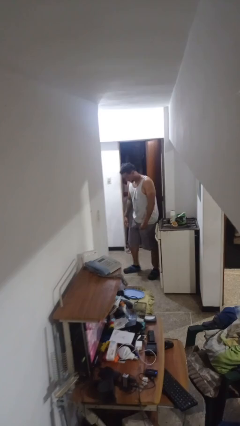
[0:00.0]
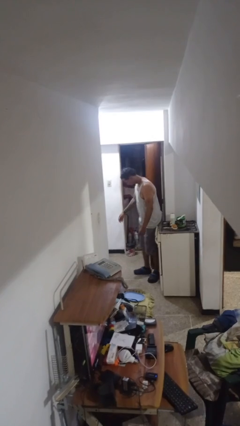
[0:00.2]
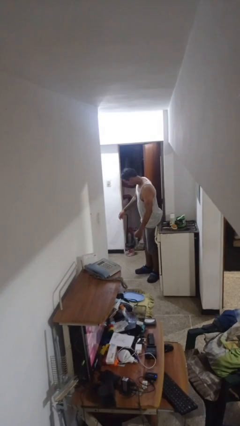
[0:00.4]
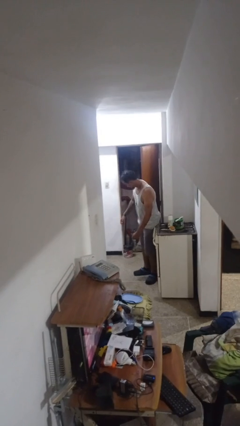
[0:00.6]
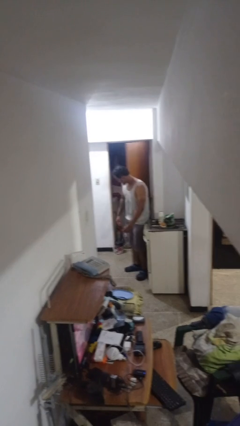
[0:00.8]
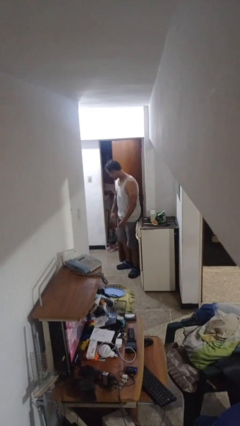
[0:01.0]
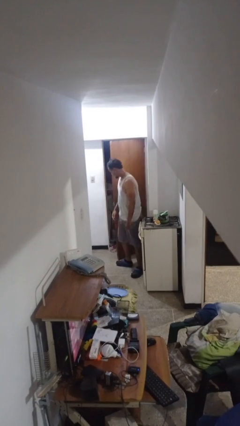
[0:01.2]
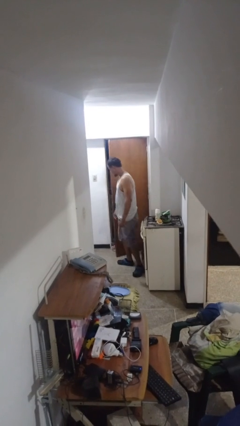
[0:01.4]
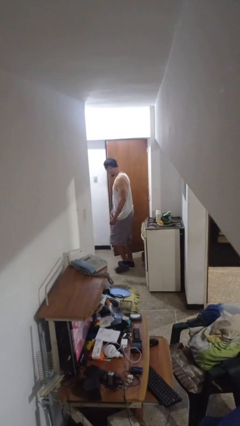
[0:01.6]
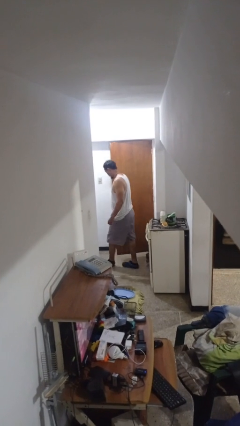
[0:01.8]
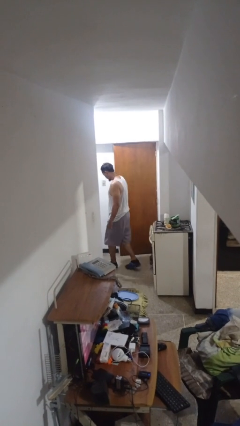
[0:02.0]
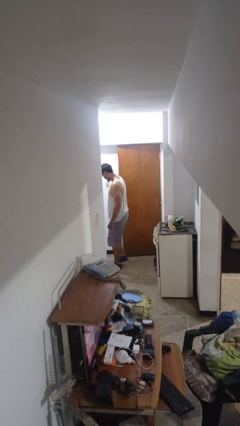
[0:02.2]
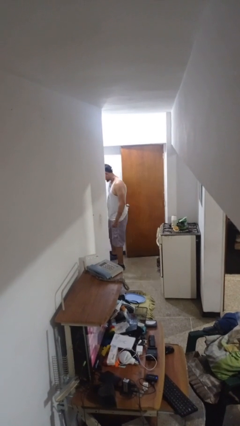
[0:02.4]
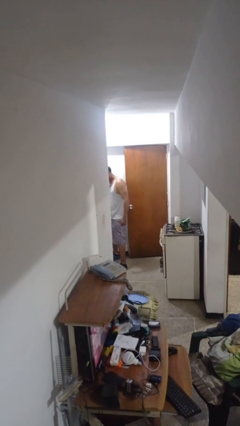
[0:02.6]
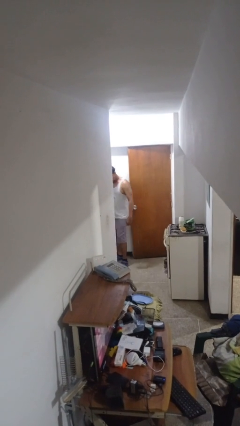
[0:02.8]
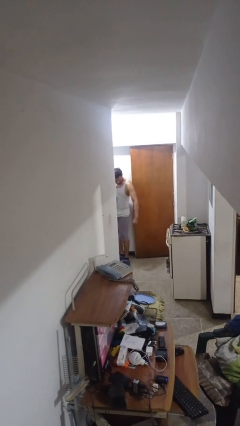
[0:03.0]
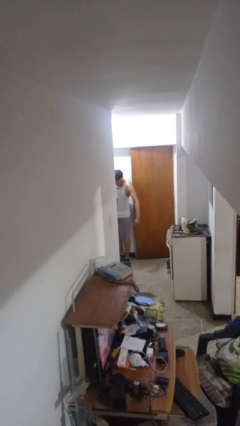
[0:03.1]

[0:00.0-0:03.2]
person closes door with hip

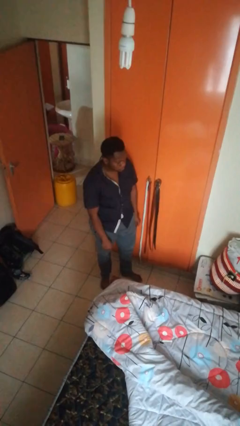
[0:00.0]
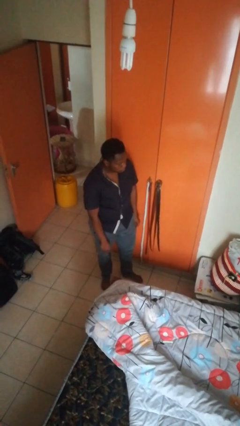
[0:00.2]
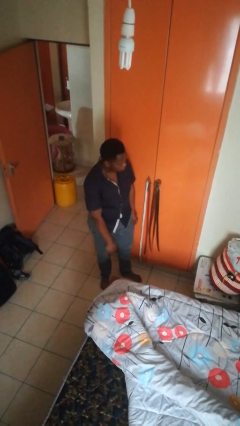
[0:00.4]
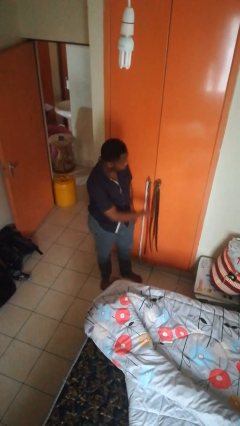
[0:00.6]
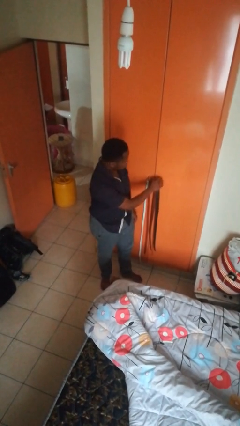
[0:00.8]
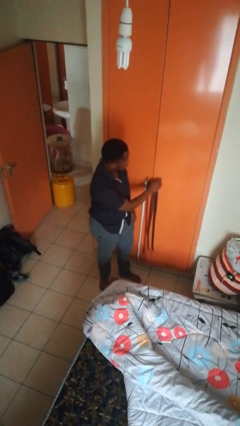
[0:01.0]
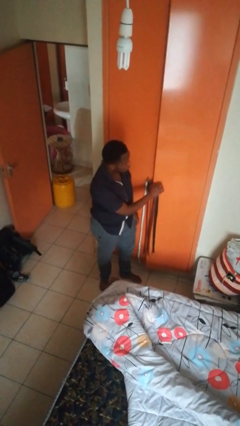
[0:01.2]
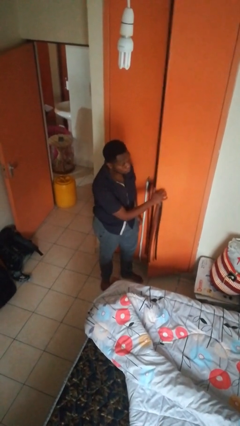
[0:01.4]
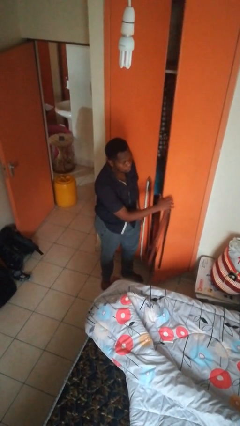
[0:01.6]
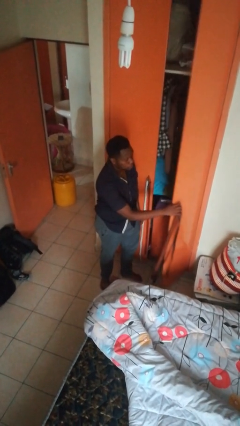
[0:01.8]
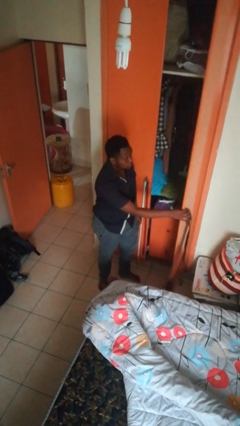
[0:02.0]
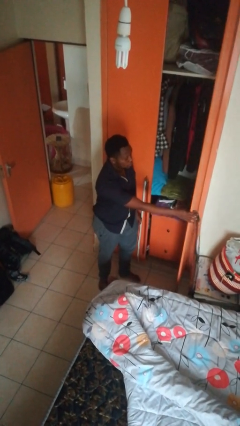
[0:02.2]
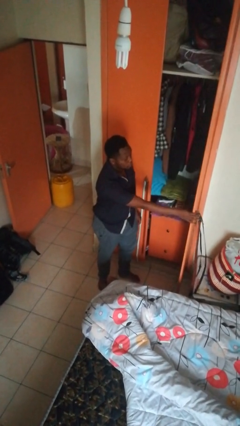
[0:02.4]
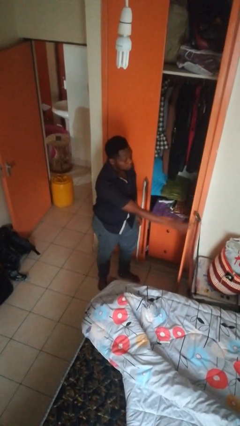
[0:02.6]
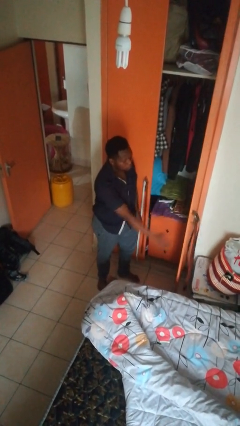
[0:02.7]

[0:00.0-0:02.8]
person opens closet door

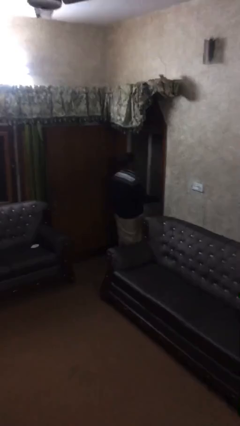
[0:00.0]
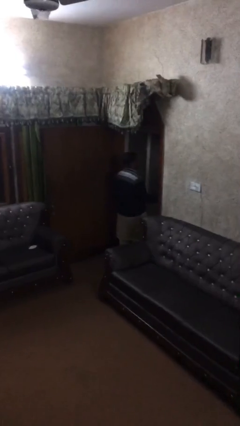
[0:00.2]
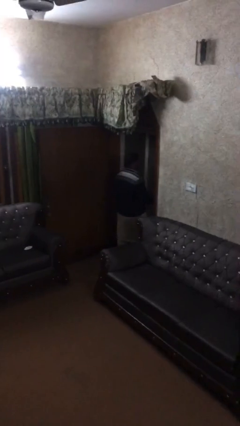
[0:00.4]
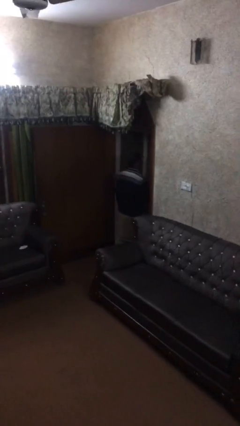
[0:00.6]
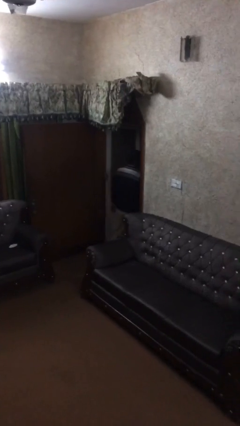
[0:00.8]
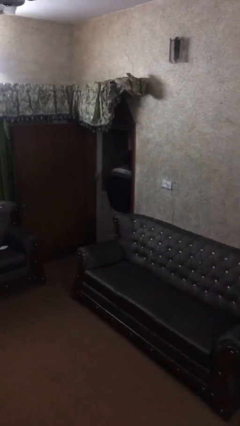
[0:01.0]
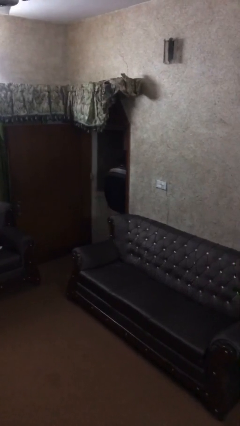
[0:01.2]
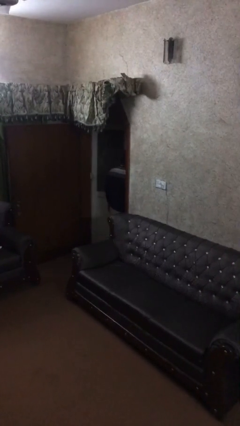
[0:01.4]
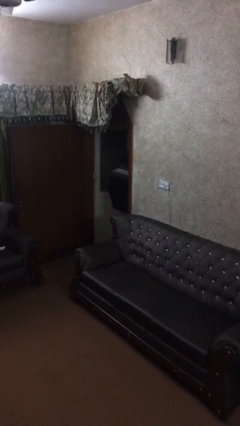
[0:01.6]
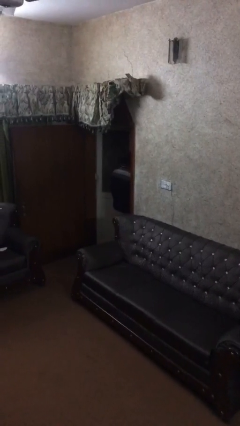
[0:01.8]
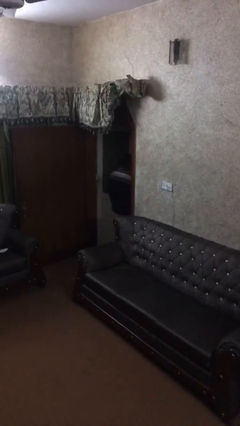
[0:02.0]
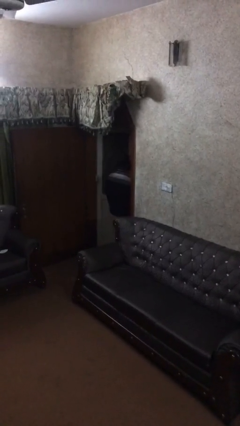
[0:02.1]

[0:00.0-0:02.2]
person opens facility door

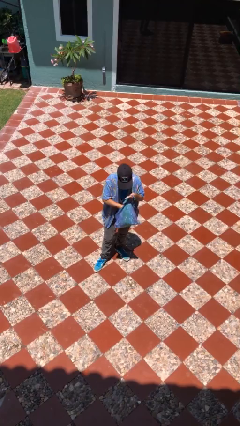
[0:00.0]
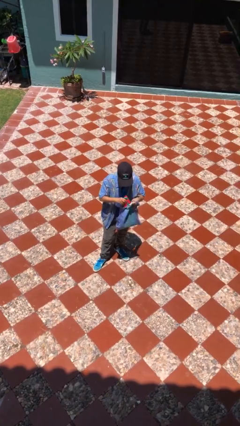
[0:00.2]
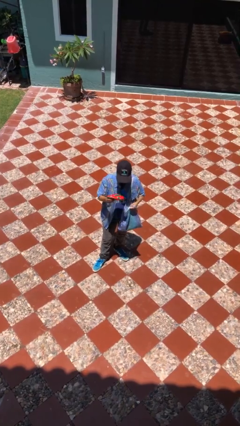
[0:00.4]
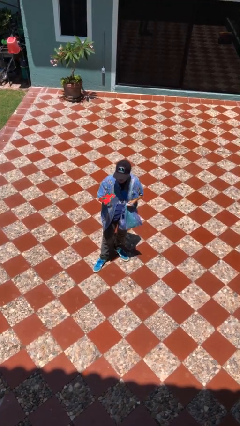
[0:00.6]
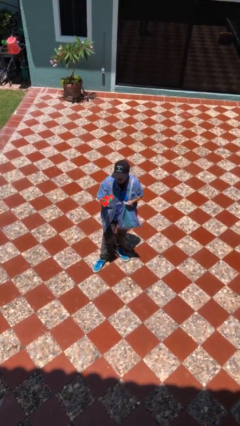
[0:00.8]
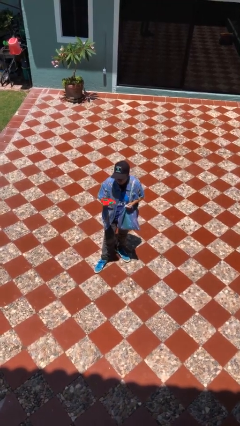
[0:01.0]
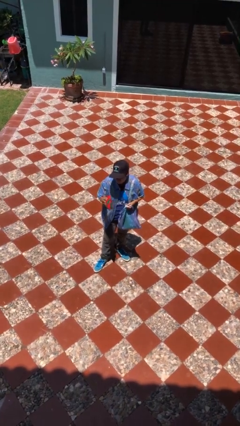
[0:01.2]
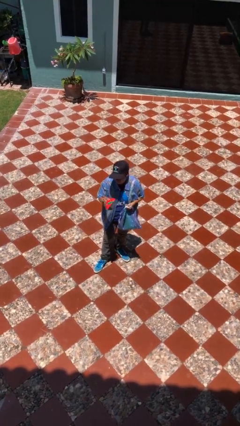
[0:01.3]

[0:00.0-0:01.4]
person takes object from purse

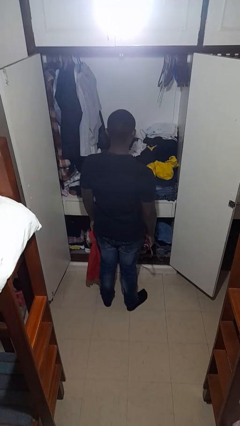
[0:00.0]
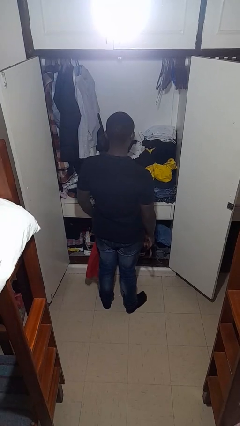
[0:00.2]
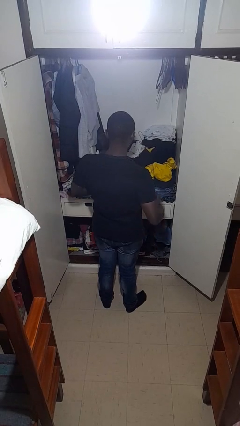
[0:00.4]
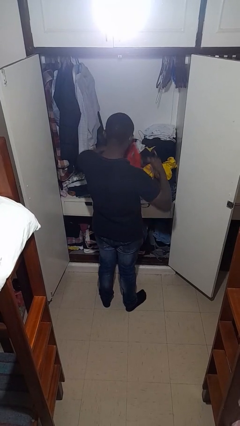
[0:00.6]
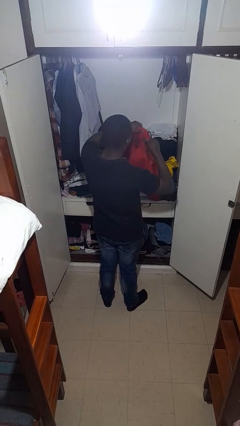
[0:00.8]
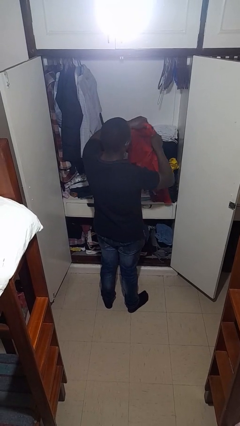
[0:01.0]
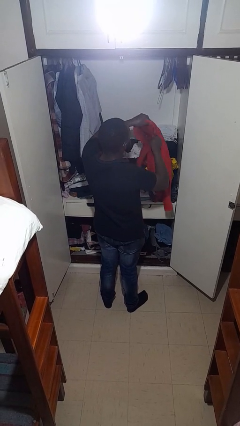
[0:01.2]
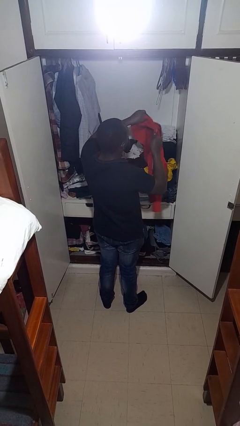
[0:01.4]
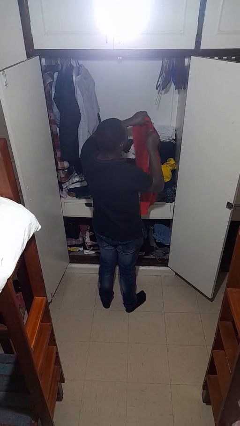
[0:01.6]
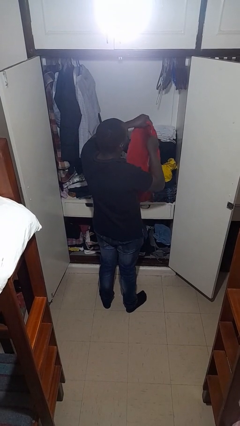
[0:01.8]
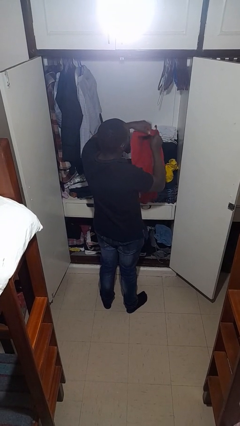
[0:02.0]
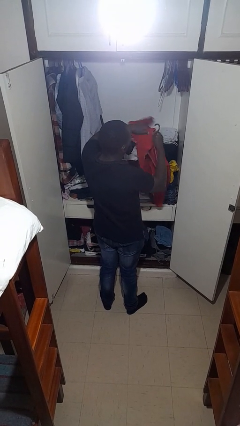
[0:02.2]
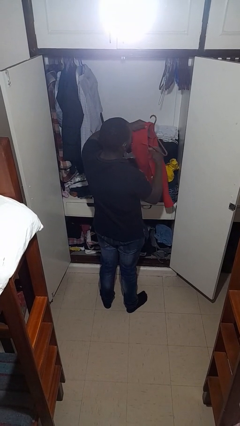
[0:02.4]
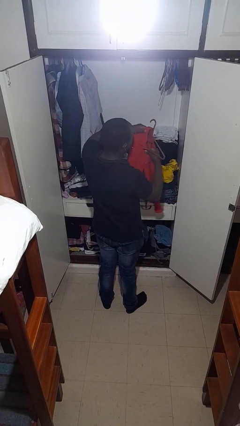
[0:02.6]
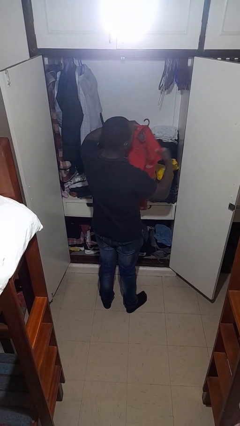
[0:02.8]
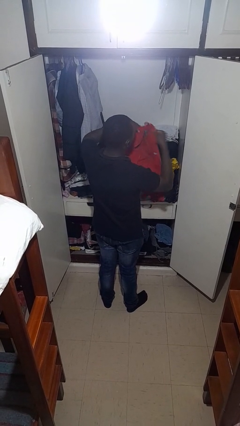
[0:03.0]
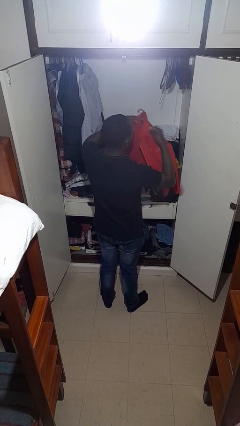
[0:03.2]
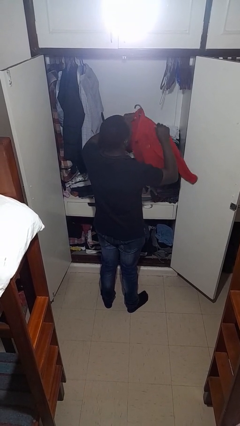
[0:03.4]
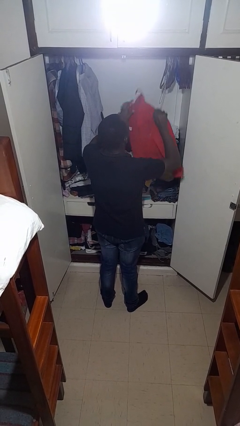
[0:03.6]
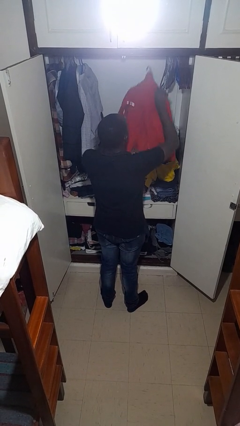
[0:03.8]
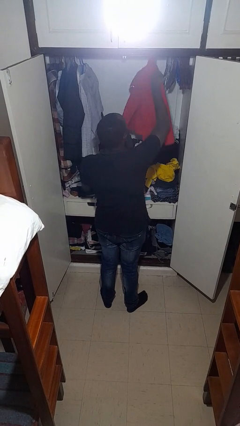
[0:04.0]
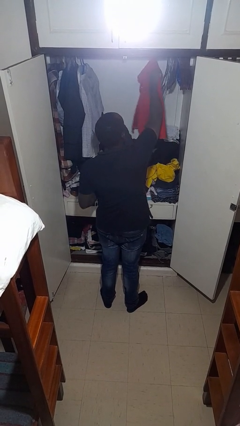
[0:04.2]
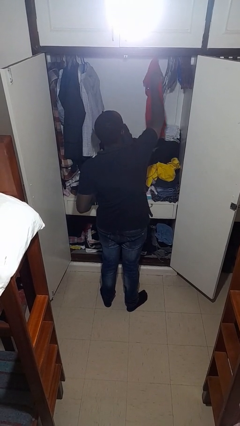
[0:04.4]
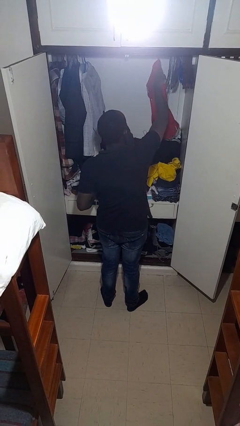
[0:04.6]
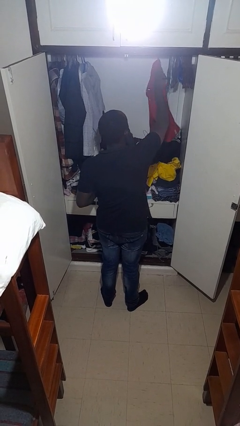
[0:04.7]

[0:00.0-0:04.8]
person puts clothes into closet

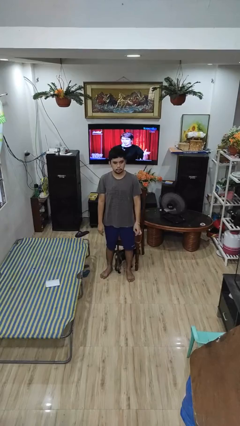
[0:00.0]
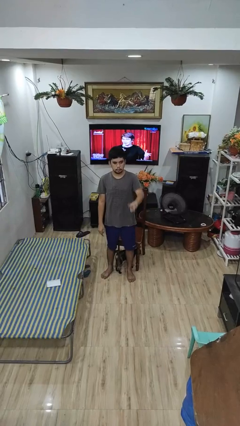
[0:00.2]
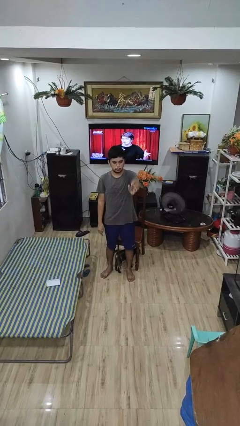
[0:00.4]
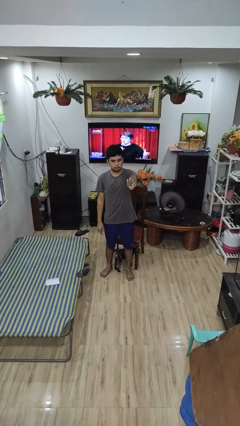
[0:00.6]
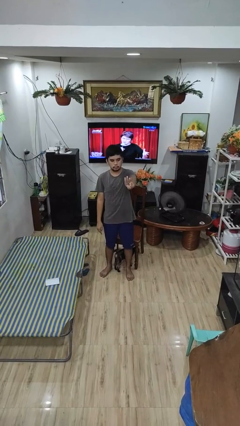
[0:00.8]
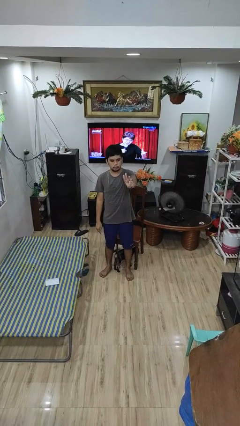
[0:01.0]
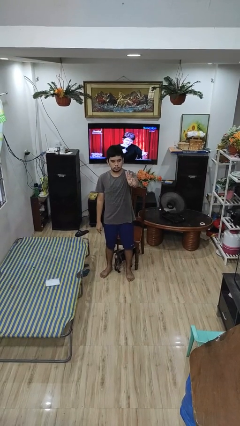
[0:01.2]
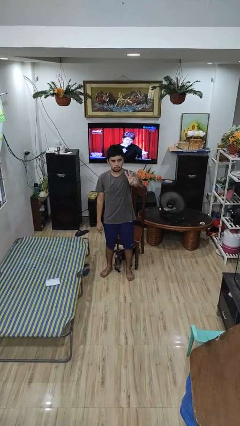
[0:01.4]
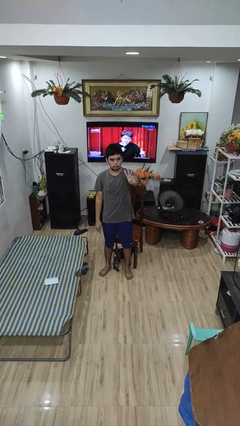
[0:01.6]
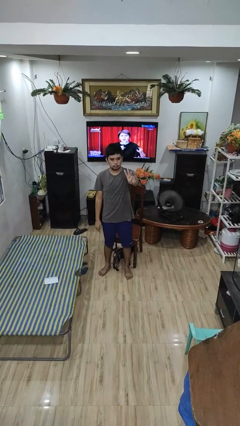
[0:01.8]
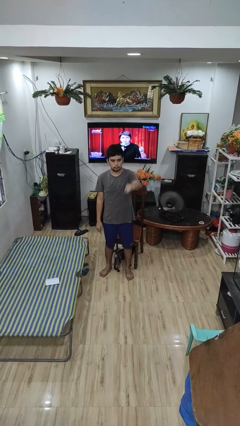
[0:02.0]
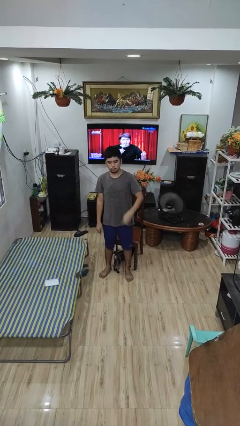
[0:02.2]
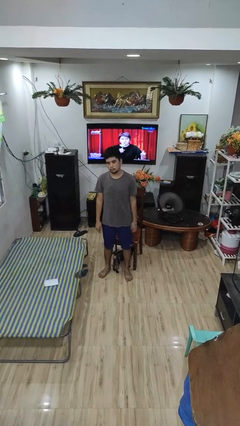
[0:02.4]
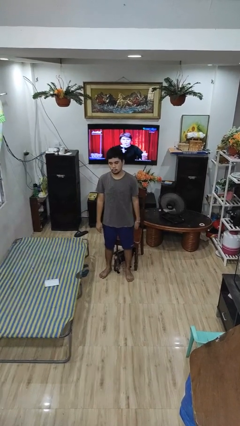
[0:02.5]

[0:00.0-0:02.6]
person gestures number three

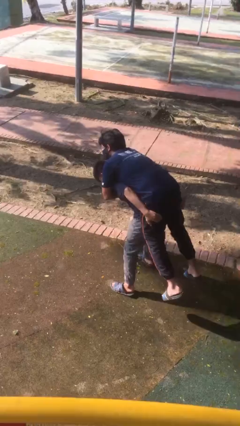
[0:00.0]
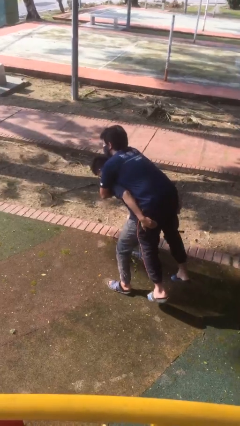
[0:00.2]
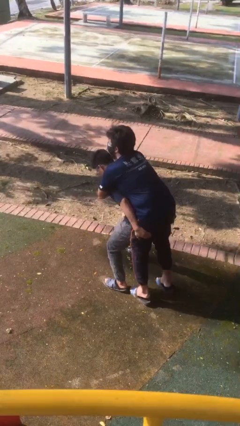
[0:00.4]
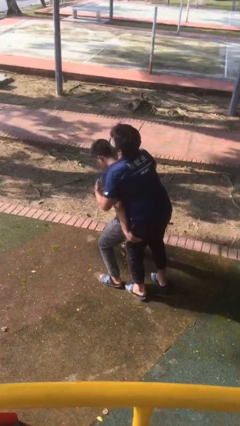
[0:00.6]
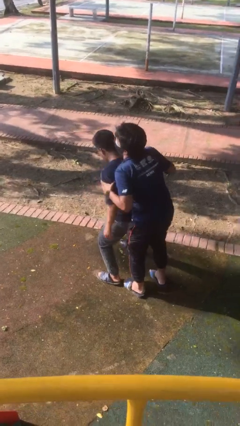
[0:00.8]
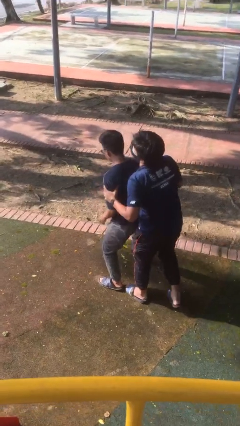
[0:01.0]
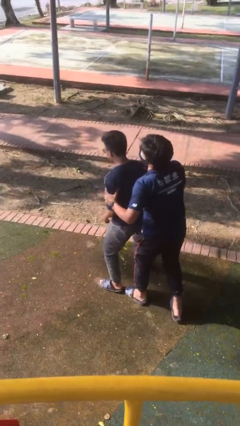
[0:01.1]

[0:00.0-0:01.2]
person puts down person
